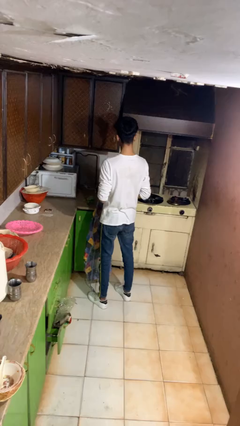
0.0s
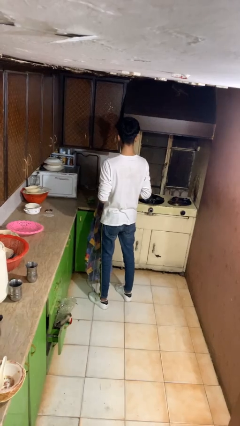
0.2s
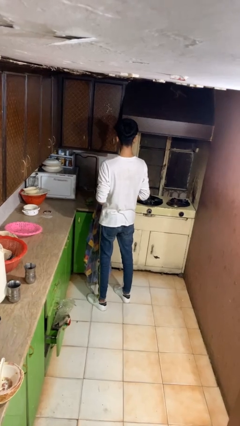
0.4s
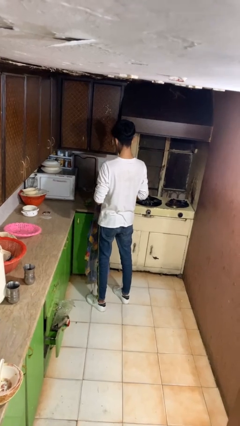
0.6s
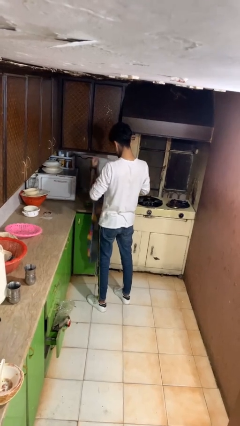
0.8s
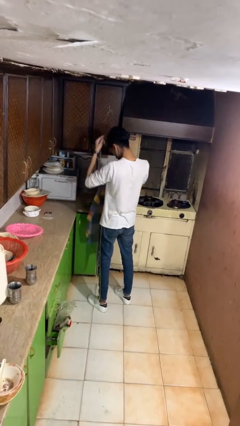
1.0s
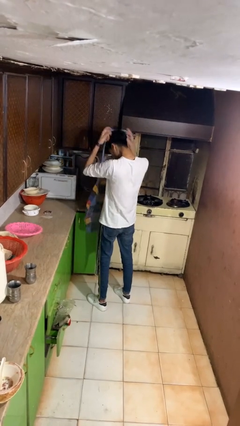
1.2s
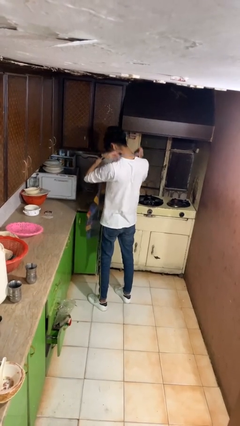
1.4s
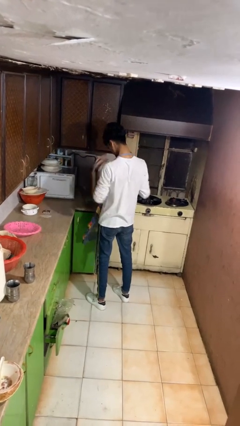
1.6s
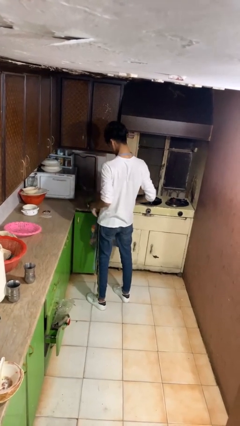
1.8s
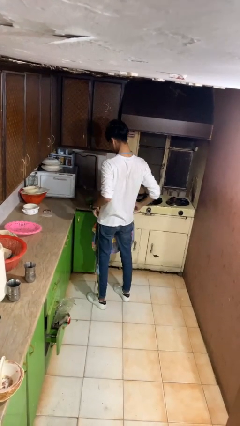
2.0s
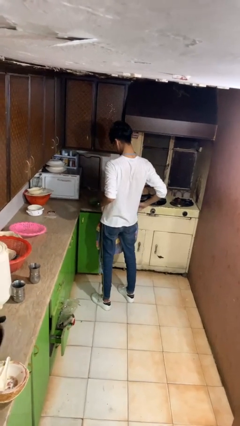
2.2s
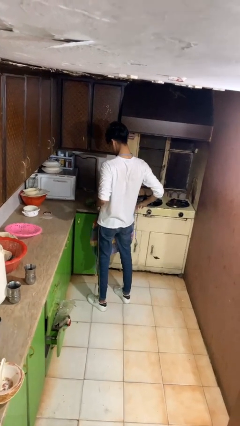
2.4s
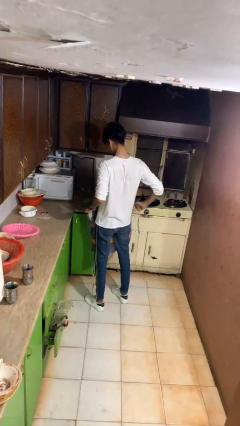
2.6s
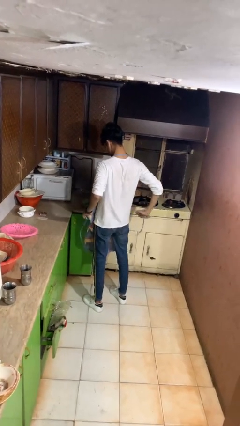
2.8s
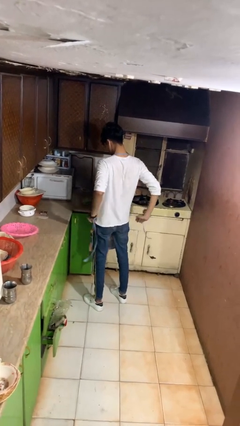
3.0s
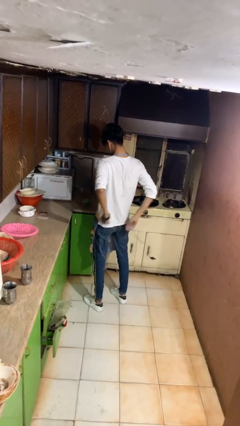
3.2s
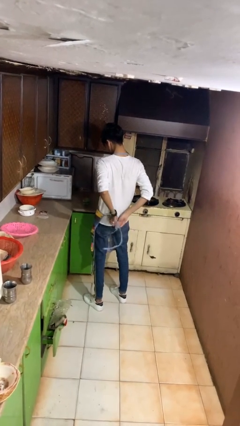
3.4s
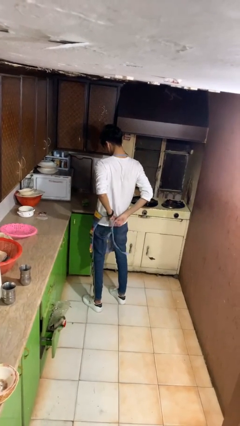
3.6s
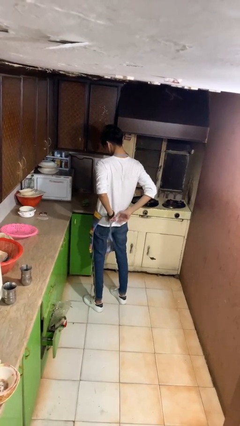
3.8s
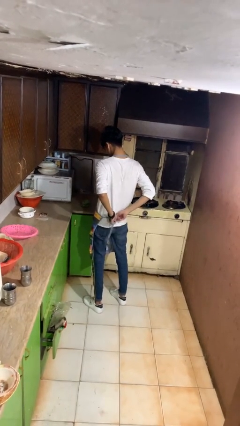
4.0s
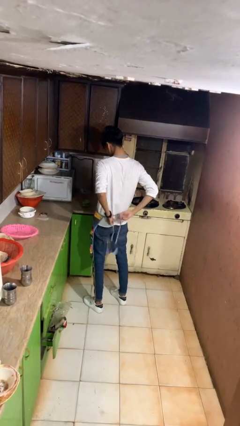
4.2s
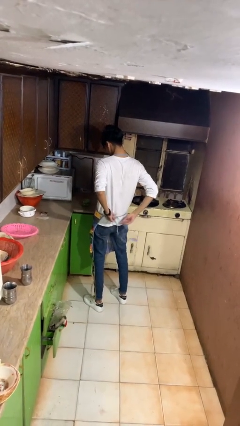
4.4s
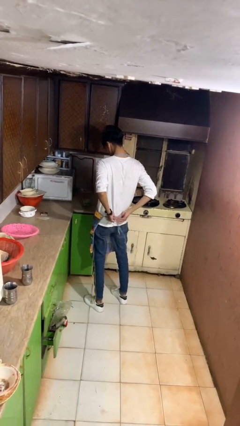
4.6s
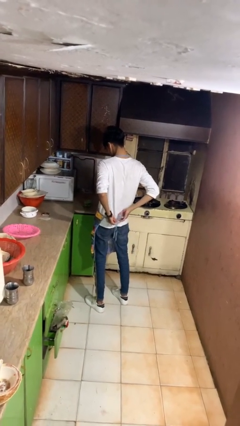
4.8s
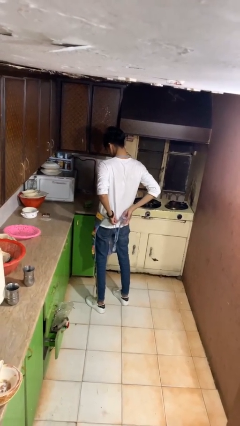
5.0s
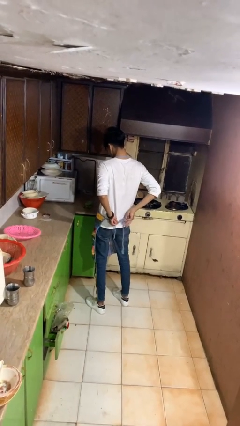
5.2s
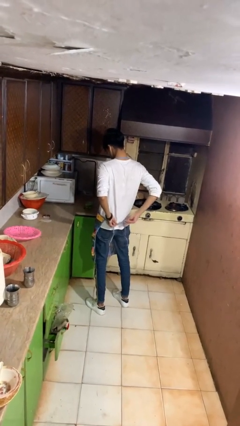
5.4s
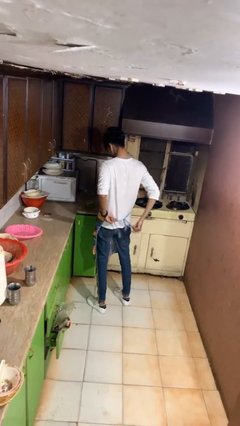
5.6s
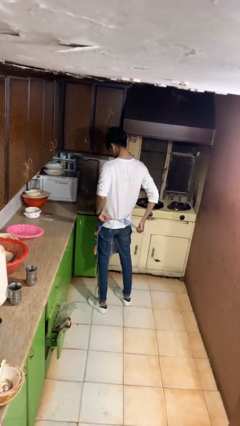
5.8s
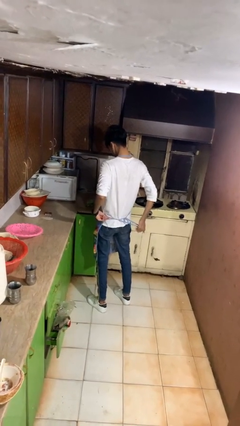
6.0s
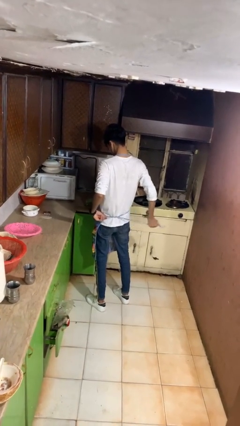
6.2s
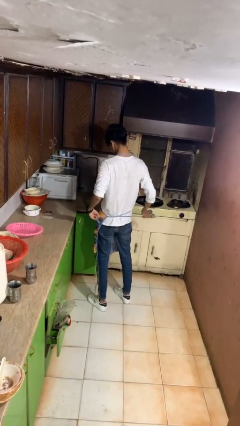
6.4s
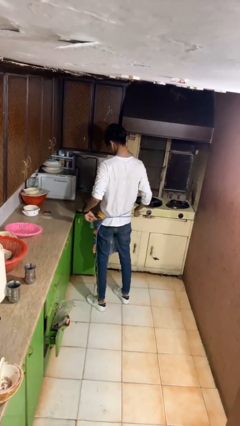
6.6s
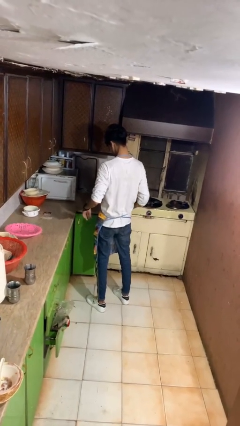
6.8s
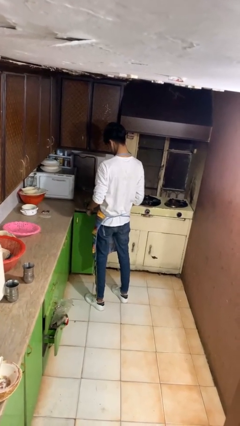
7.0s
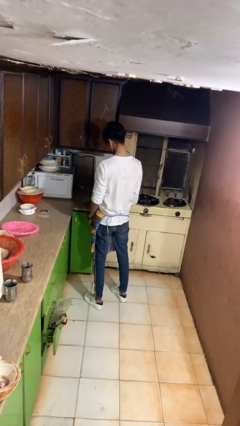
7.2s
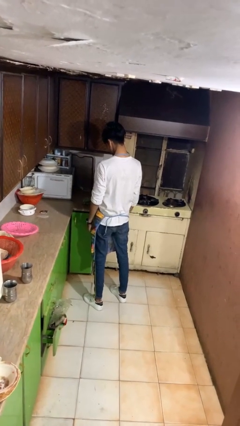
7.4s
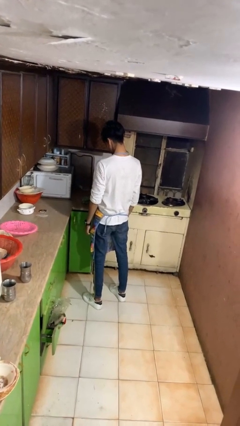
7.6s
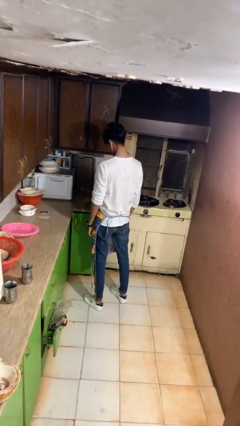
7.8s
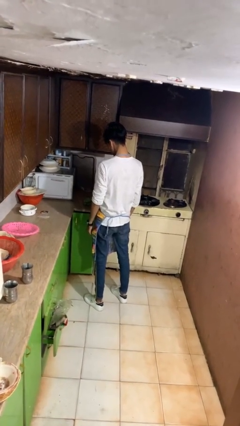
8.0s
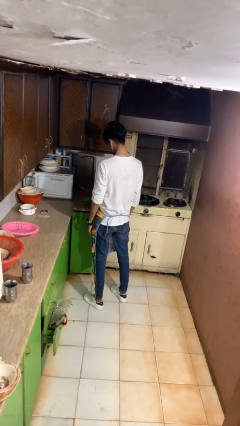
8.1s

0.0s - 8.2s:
person puts on apron

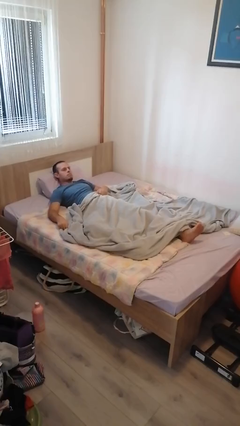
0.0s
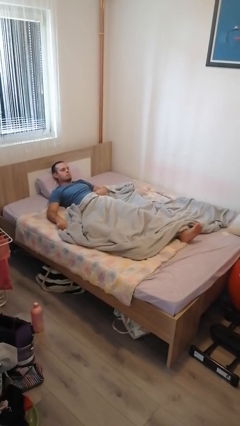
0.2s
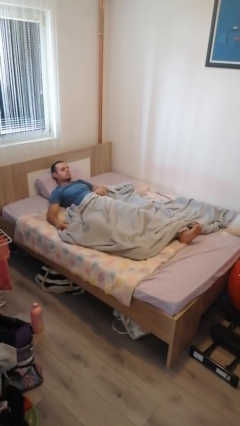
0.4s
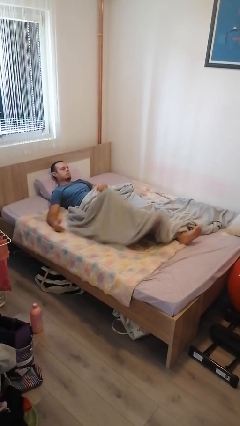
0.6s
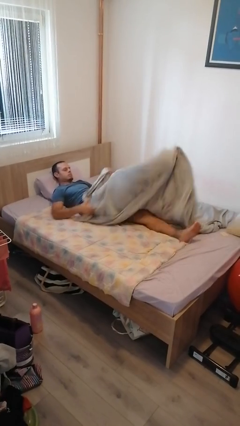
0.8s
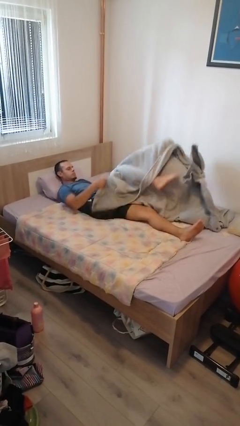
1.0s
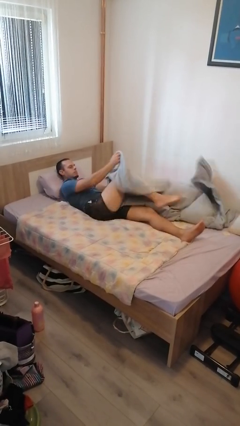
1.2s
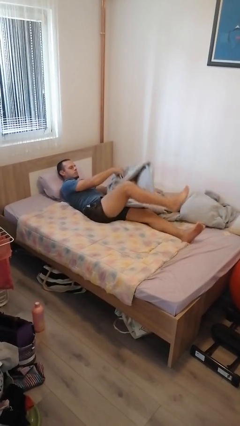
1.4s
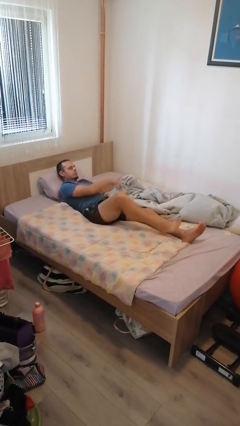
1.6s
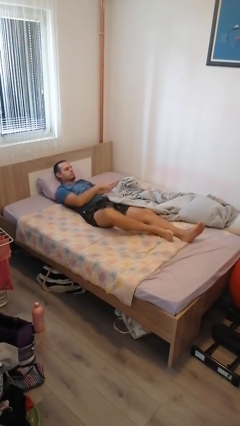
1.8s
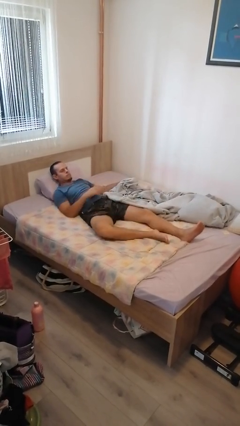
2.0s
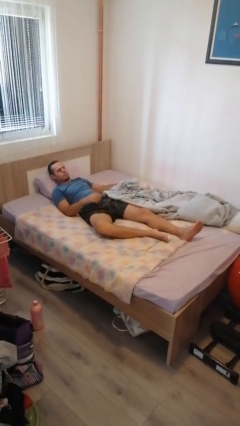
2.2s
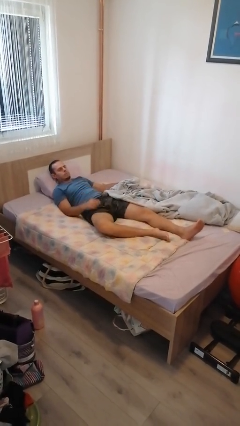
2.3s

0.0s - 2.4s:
person uncovers with bedsheets

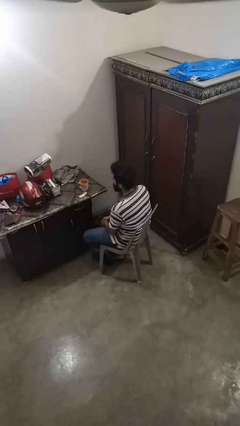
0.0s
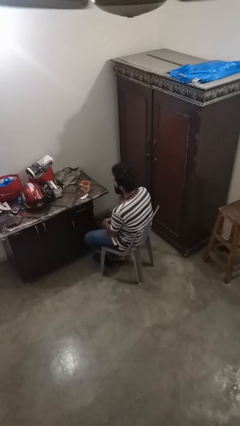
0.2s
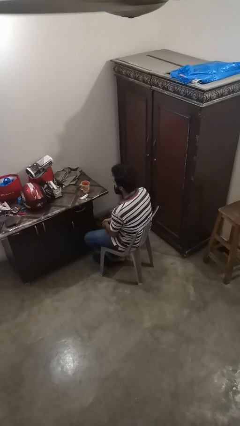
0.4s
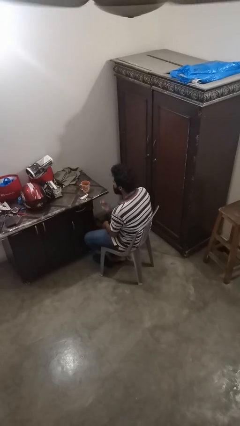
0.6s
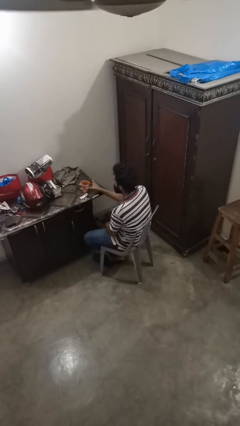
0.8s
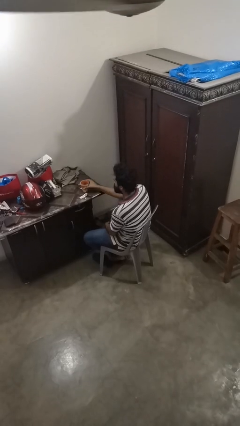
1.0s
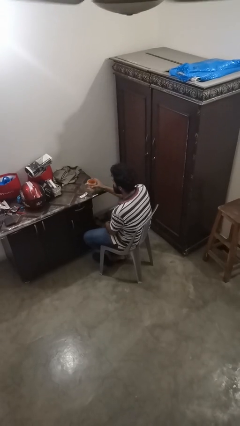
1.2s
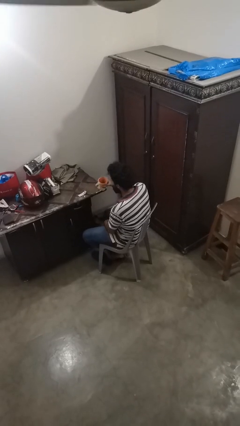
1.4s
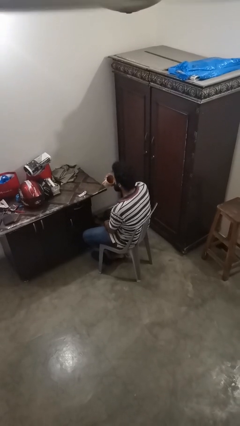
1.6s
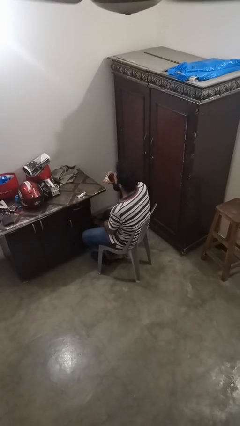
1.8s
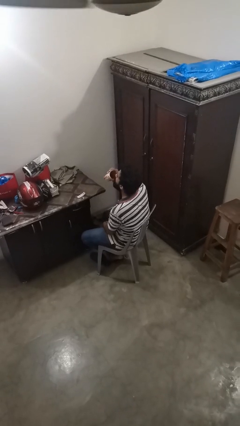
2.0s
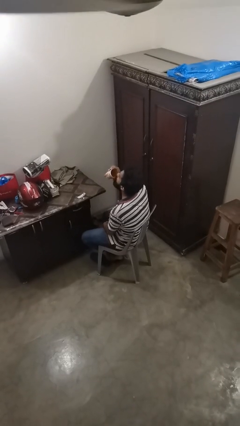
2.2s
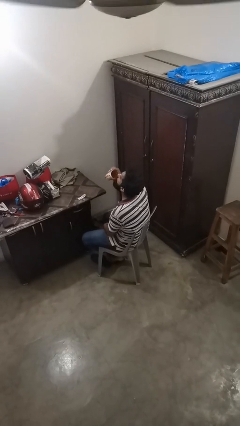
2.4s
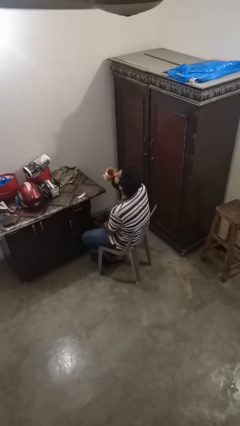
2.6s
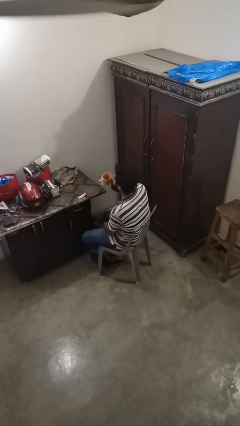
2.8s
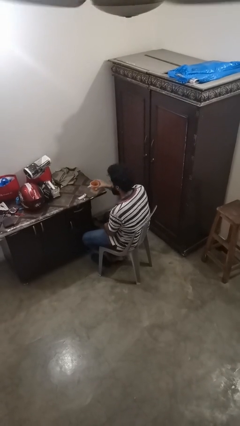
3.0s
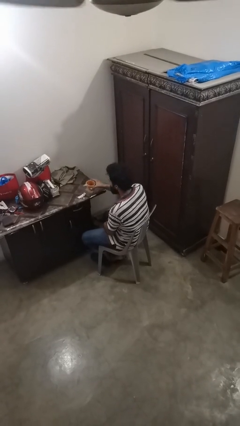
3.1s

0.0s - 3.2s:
person drinks from cup

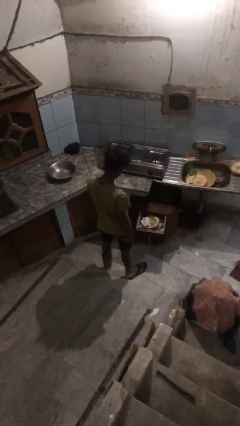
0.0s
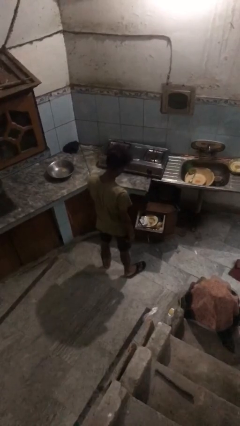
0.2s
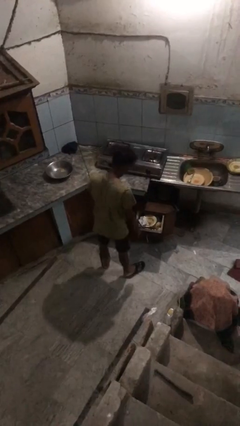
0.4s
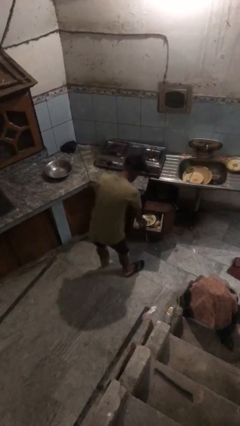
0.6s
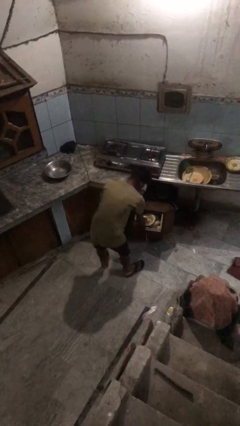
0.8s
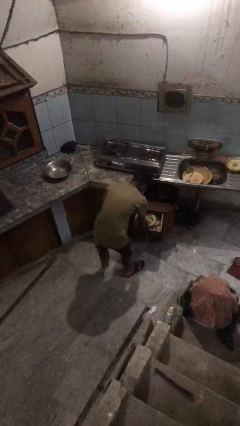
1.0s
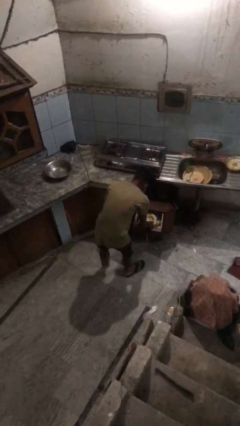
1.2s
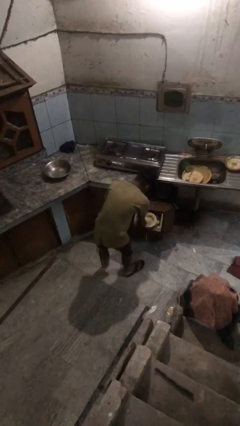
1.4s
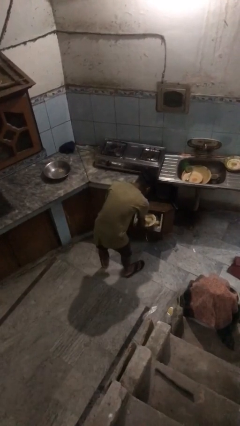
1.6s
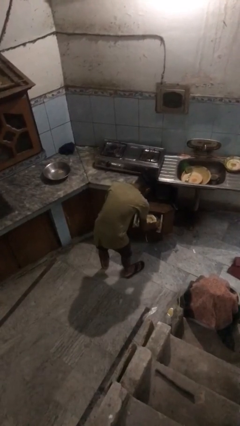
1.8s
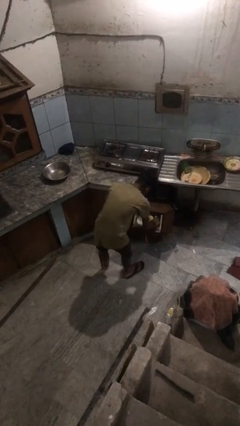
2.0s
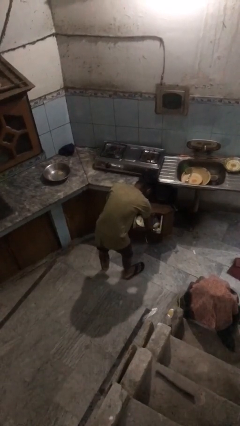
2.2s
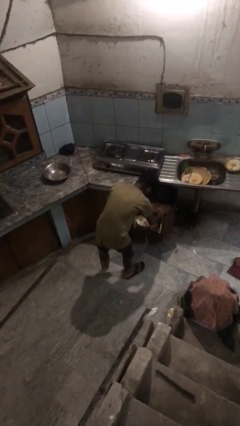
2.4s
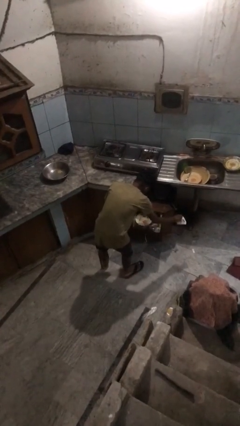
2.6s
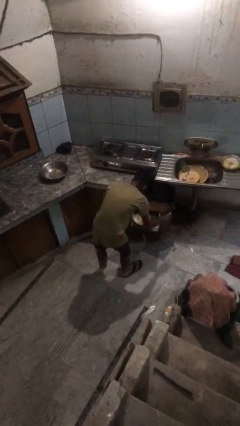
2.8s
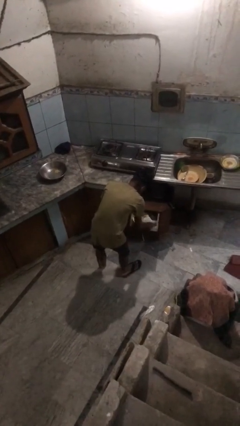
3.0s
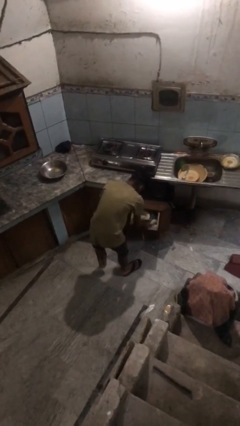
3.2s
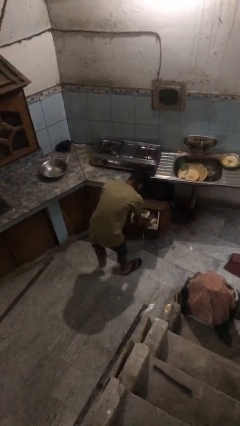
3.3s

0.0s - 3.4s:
person searches in kitchen drawer

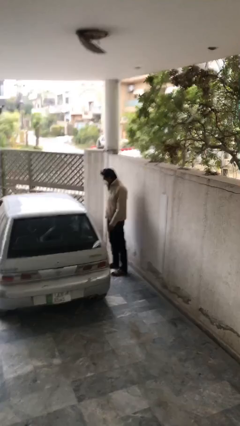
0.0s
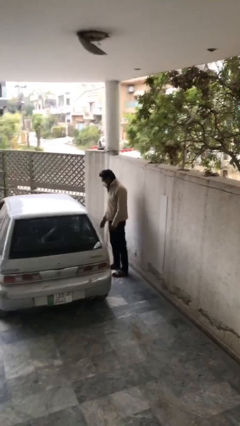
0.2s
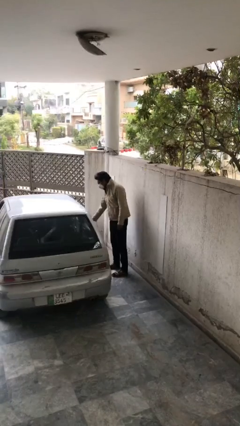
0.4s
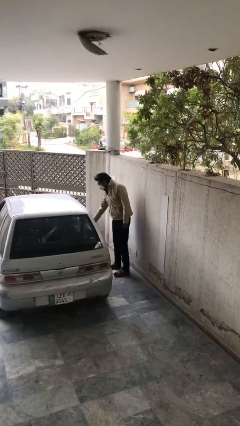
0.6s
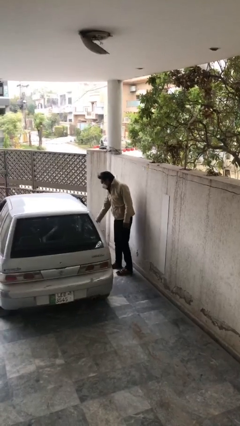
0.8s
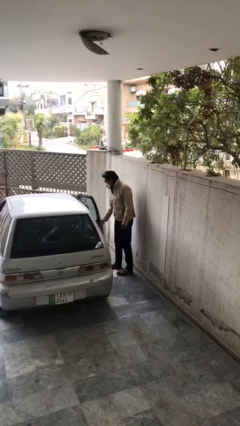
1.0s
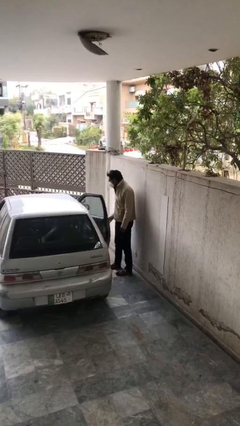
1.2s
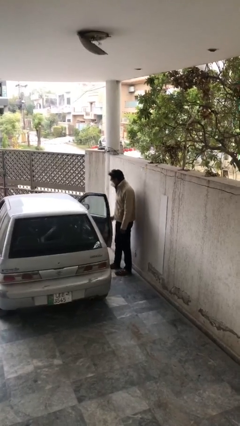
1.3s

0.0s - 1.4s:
person opens car door
